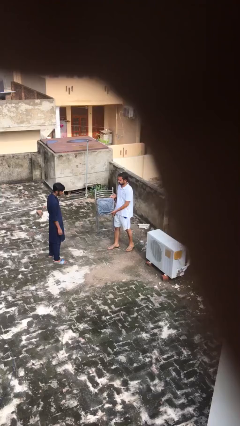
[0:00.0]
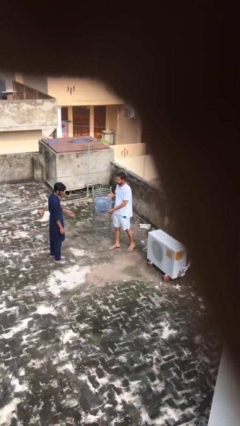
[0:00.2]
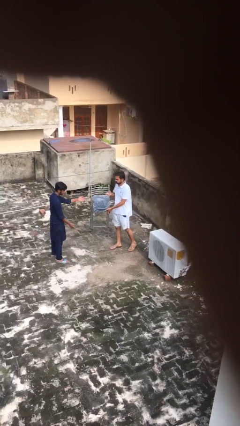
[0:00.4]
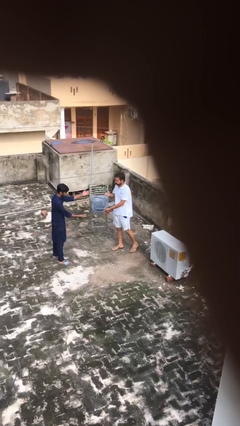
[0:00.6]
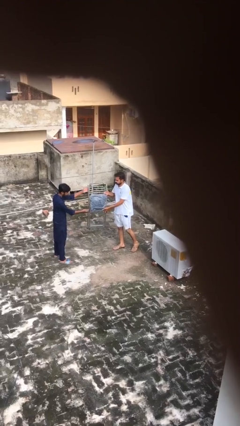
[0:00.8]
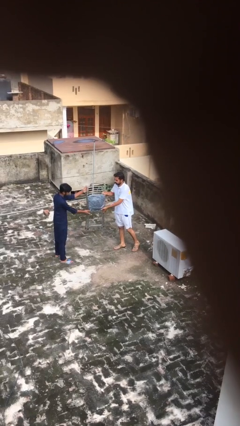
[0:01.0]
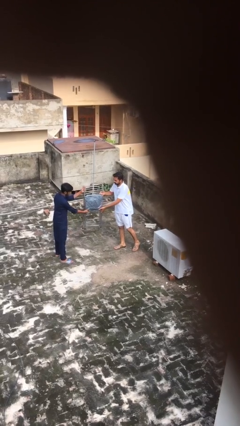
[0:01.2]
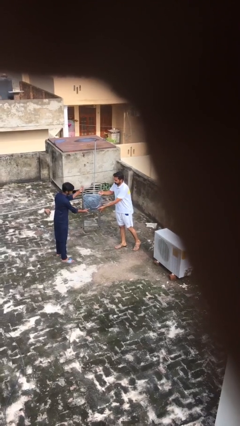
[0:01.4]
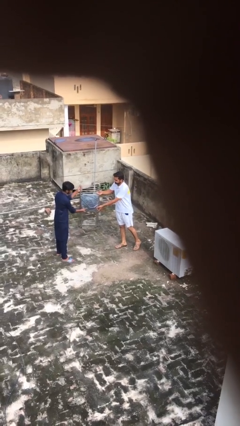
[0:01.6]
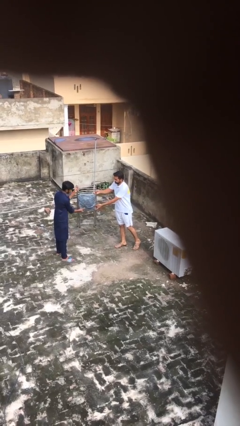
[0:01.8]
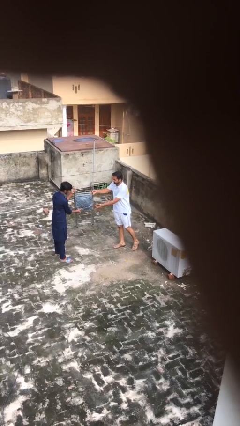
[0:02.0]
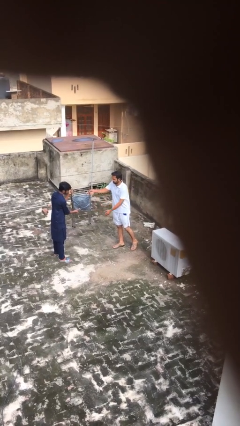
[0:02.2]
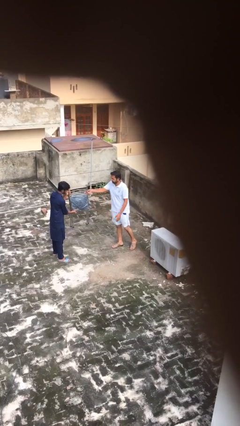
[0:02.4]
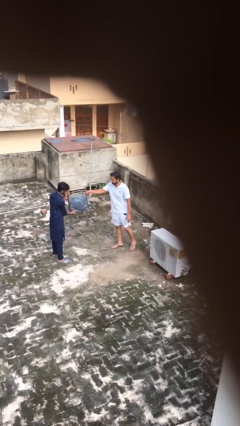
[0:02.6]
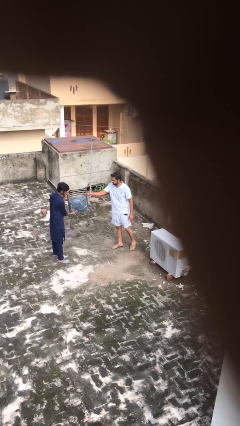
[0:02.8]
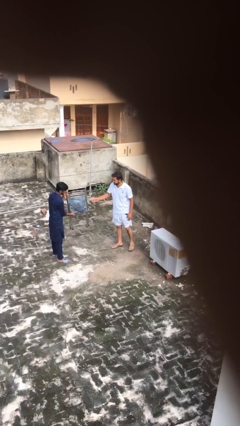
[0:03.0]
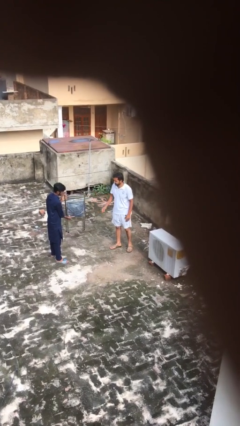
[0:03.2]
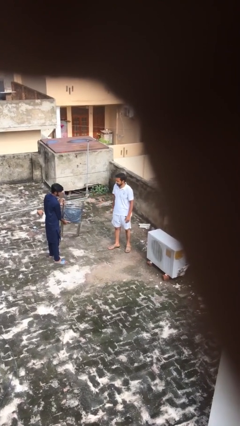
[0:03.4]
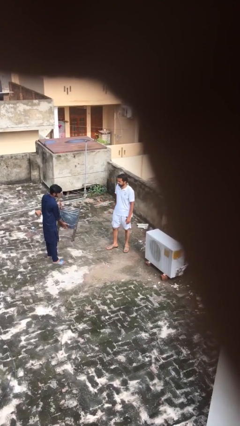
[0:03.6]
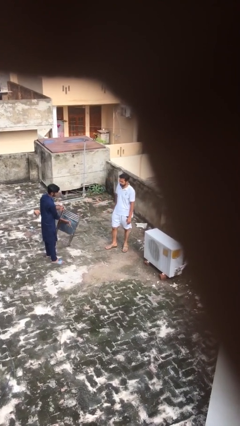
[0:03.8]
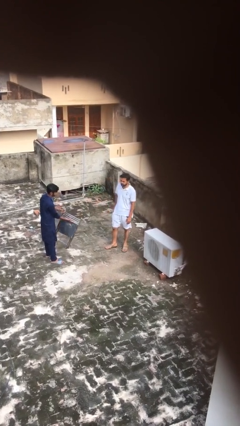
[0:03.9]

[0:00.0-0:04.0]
person transfers object to person

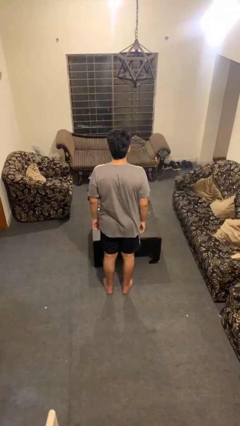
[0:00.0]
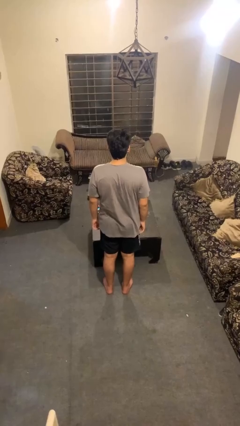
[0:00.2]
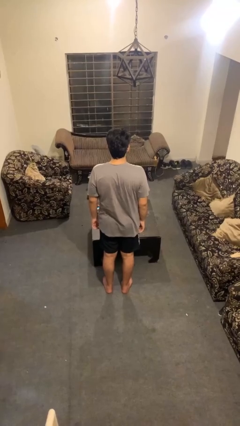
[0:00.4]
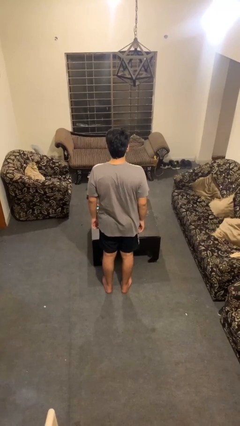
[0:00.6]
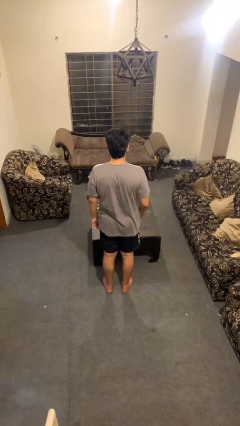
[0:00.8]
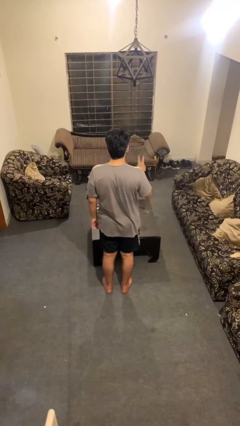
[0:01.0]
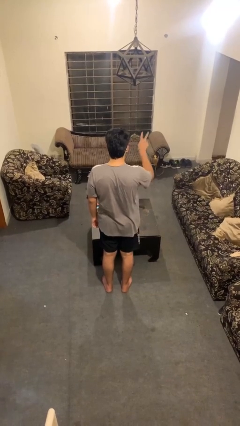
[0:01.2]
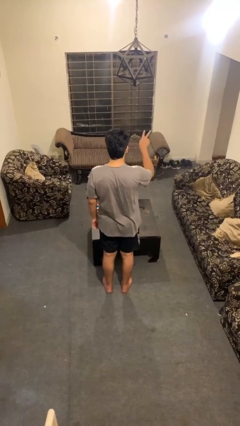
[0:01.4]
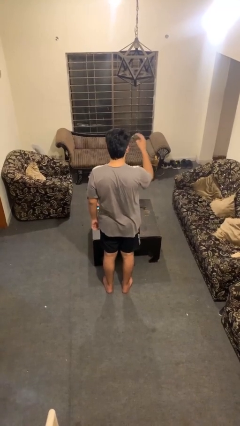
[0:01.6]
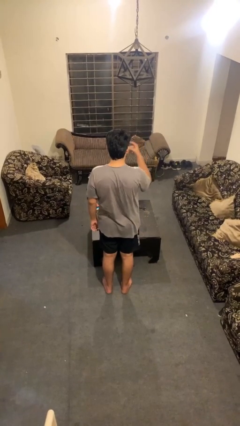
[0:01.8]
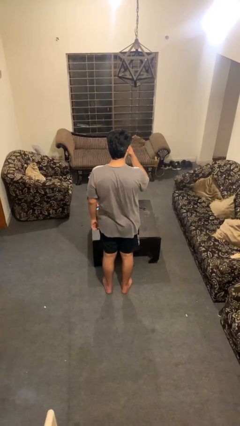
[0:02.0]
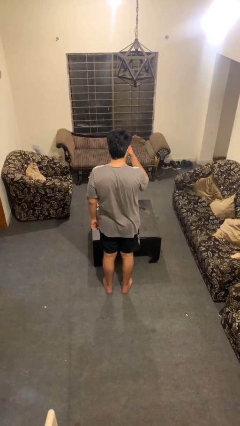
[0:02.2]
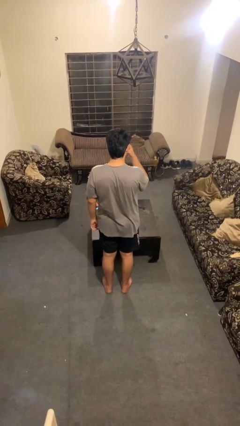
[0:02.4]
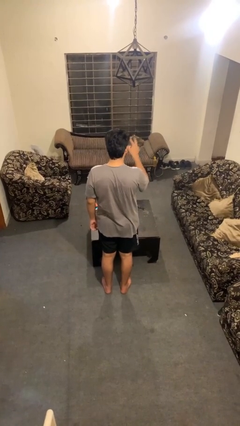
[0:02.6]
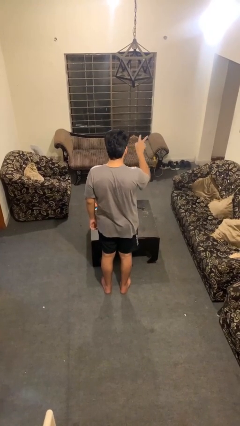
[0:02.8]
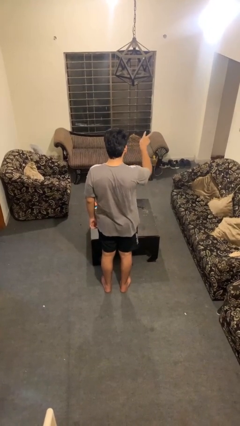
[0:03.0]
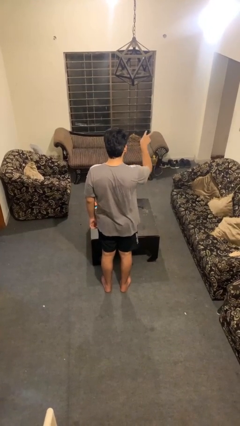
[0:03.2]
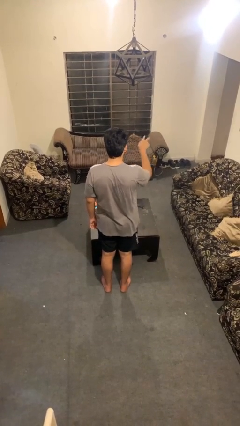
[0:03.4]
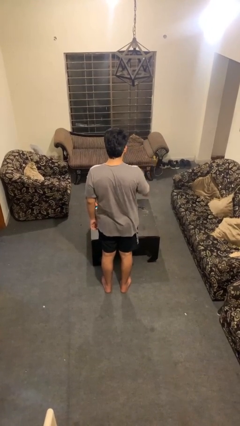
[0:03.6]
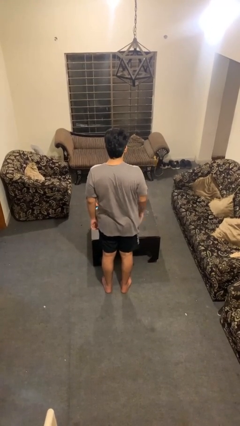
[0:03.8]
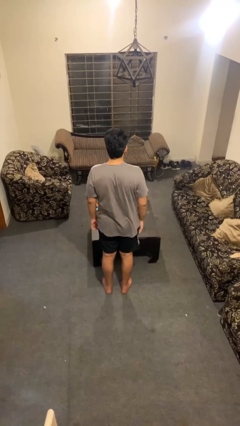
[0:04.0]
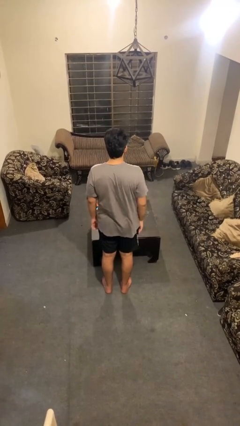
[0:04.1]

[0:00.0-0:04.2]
person gestures watch closely

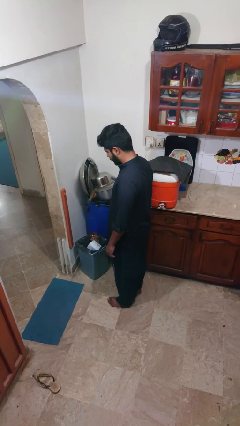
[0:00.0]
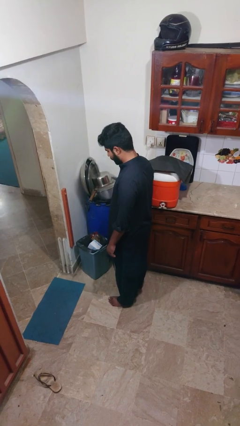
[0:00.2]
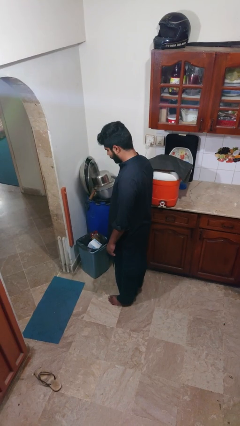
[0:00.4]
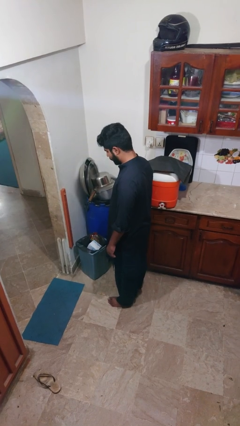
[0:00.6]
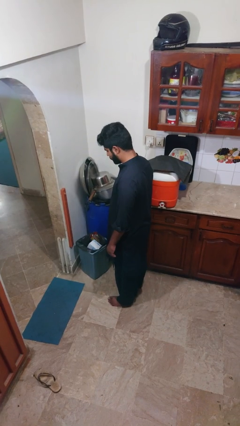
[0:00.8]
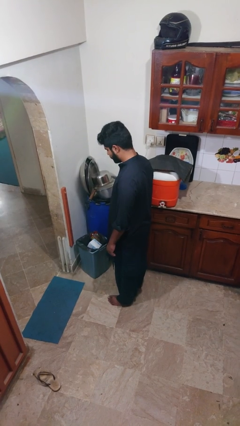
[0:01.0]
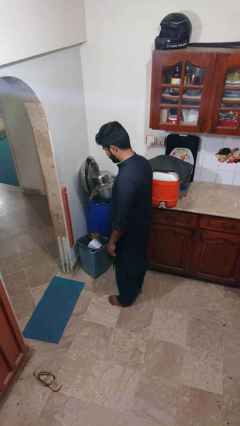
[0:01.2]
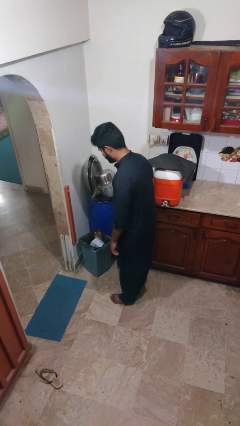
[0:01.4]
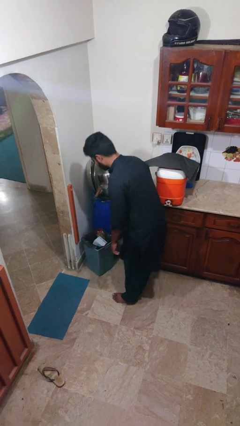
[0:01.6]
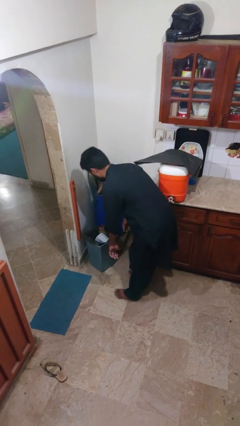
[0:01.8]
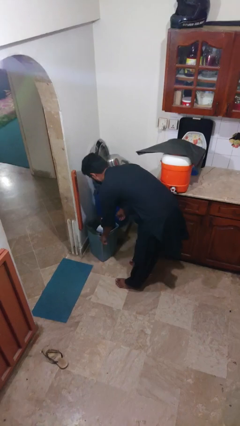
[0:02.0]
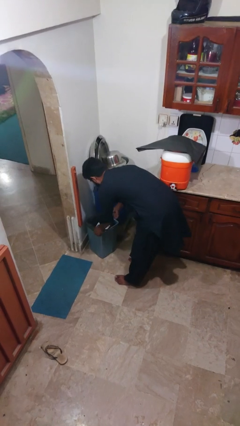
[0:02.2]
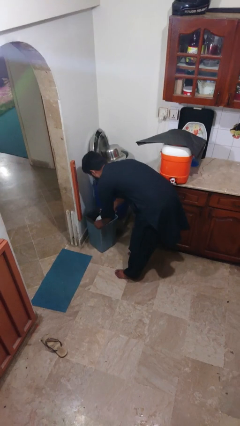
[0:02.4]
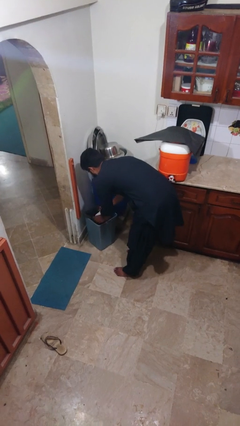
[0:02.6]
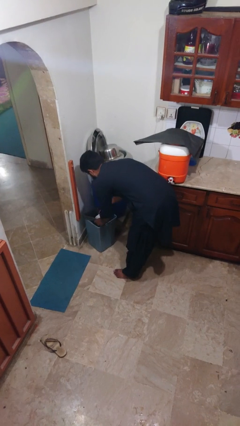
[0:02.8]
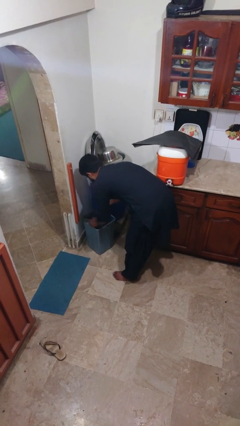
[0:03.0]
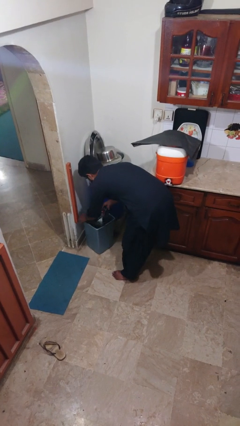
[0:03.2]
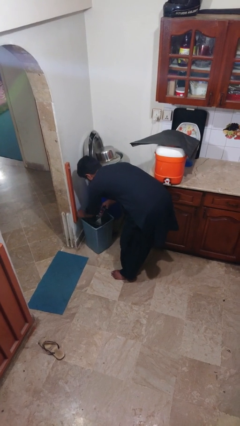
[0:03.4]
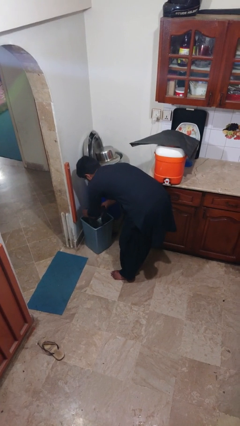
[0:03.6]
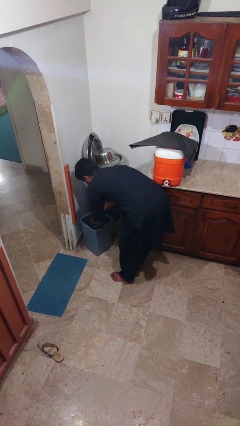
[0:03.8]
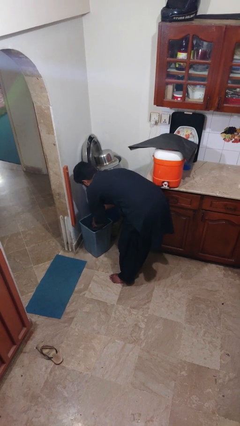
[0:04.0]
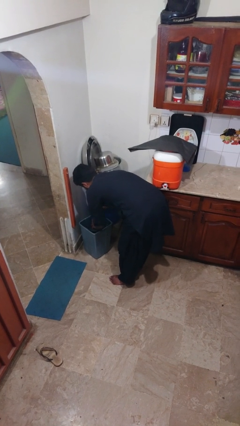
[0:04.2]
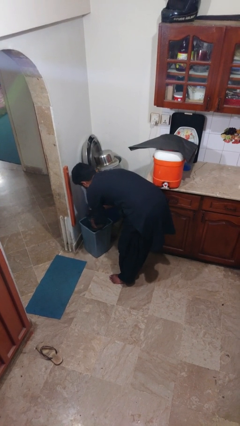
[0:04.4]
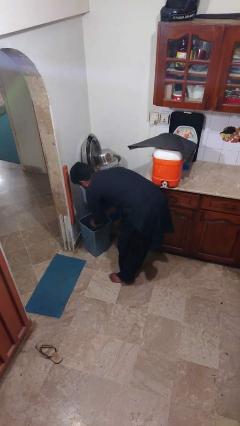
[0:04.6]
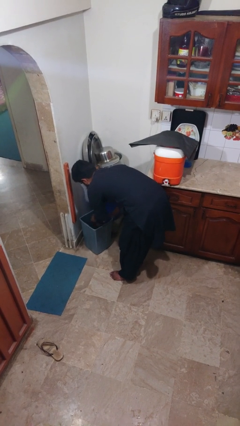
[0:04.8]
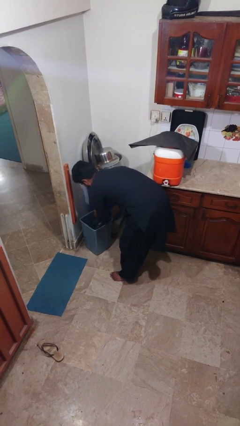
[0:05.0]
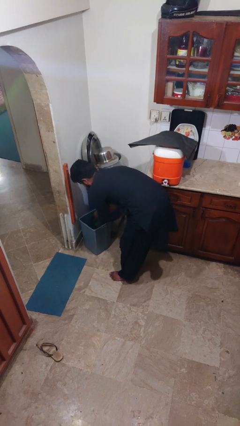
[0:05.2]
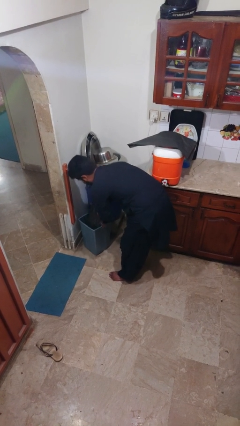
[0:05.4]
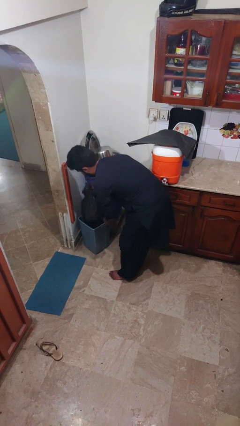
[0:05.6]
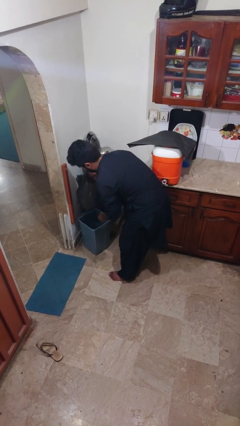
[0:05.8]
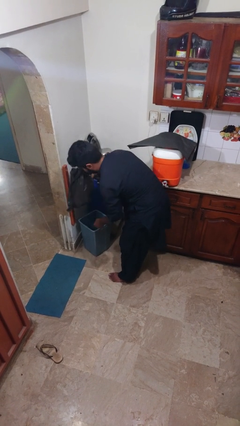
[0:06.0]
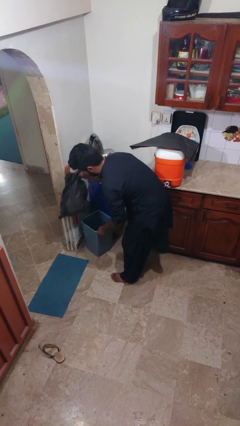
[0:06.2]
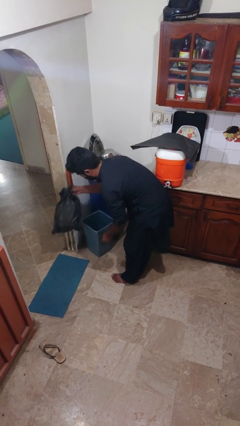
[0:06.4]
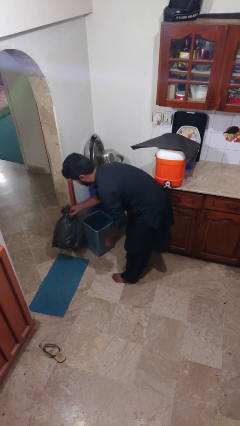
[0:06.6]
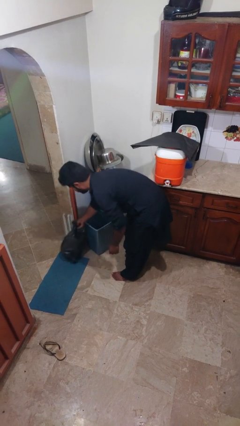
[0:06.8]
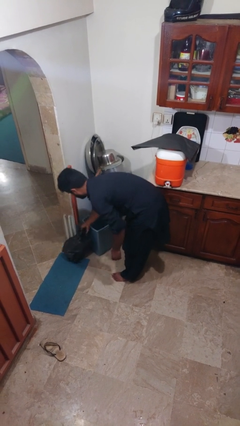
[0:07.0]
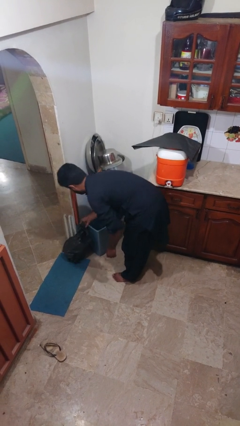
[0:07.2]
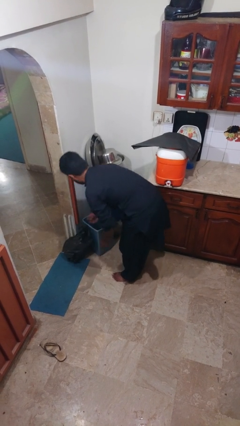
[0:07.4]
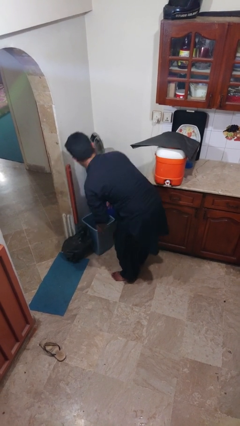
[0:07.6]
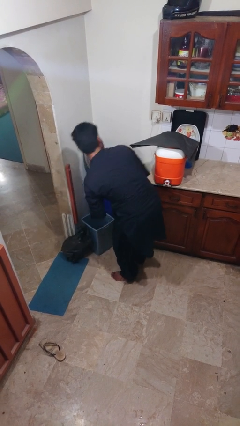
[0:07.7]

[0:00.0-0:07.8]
person removes trashbag from trashcan

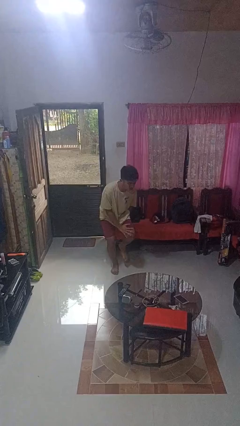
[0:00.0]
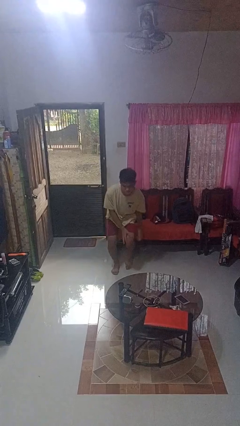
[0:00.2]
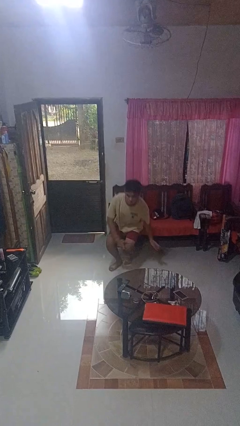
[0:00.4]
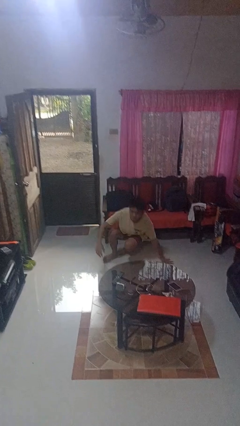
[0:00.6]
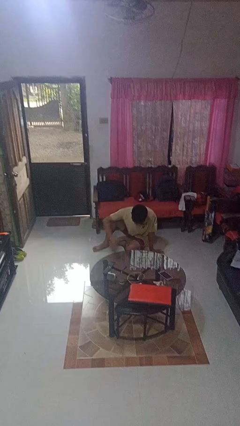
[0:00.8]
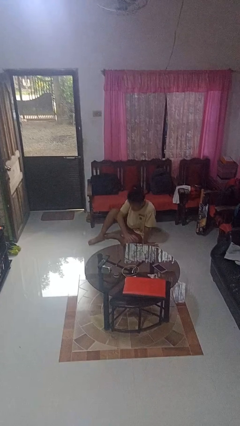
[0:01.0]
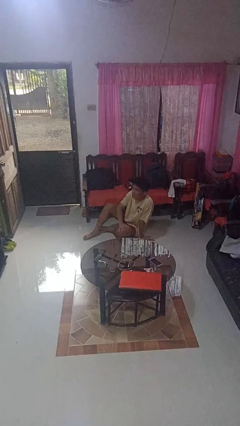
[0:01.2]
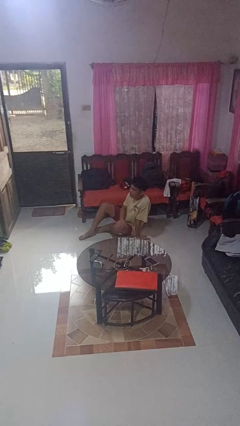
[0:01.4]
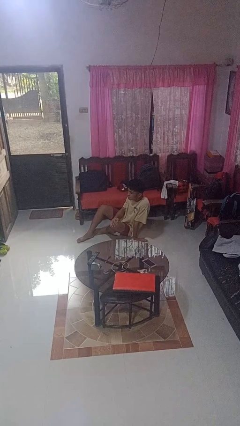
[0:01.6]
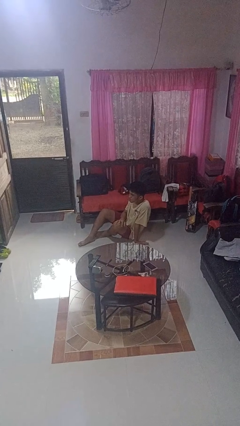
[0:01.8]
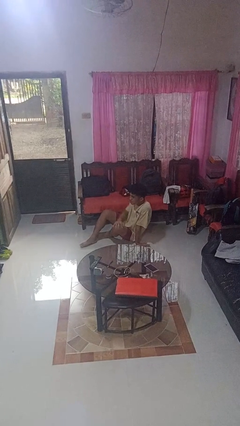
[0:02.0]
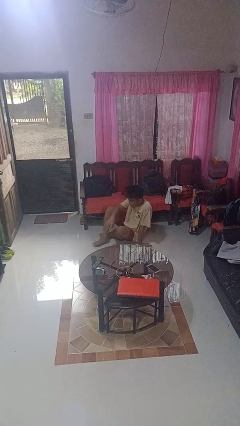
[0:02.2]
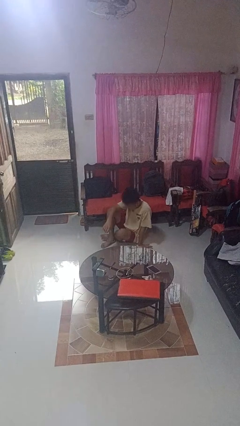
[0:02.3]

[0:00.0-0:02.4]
person lies down on floor
